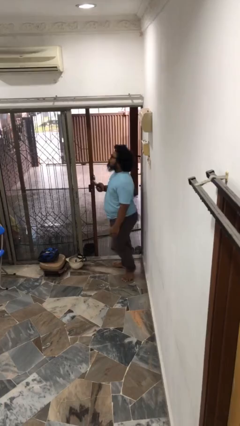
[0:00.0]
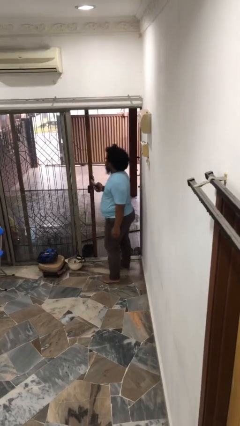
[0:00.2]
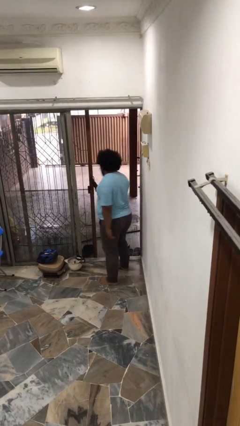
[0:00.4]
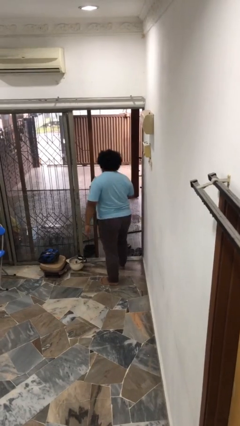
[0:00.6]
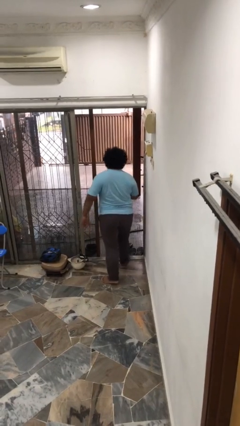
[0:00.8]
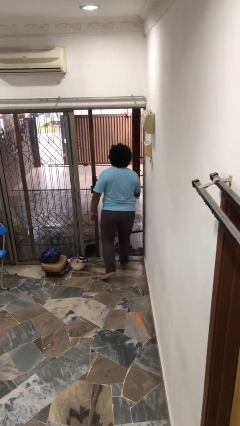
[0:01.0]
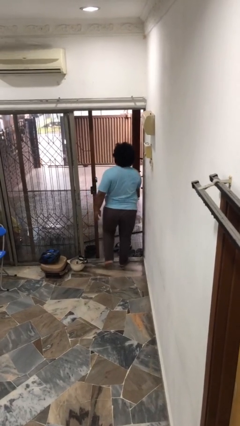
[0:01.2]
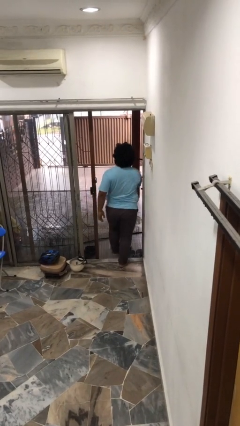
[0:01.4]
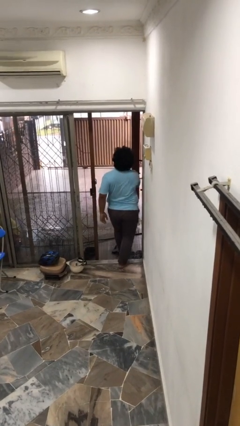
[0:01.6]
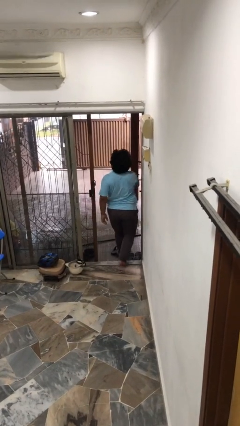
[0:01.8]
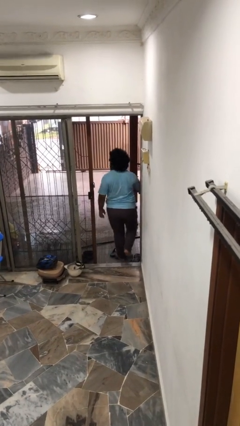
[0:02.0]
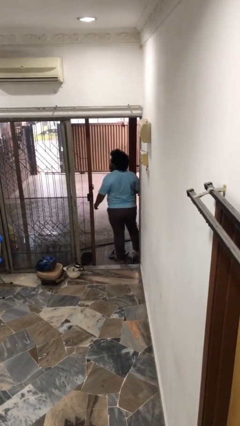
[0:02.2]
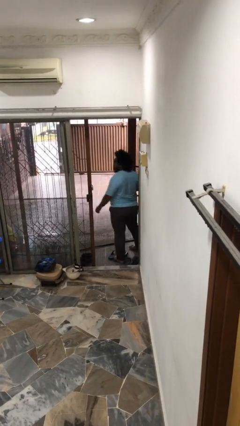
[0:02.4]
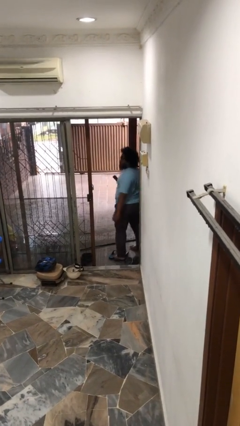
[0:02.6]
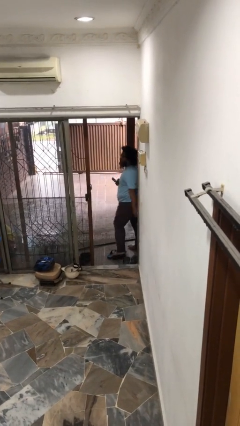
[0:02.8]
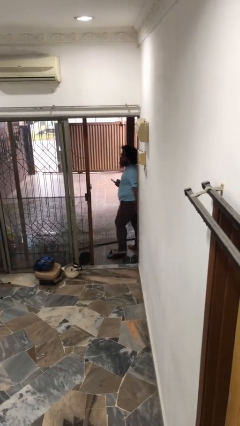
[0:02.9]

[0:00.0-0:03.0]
person exits scene through structure

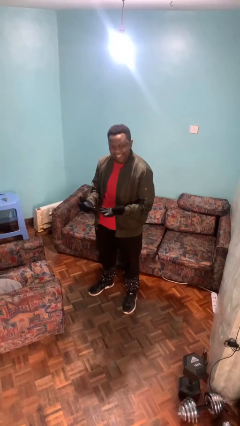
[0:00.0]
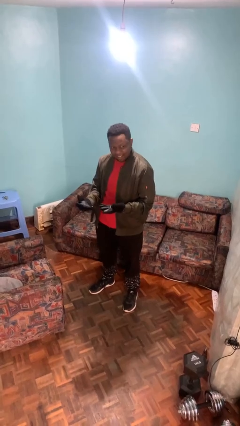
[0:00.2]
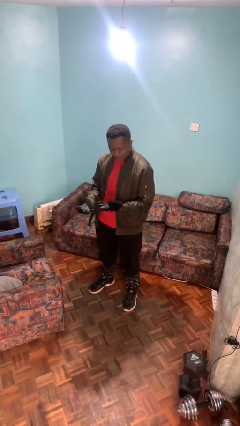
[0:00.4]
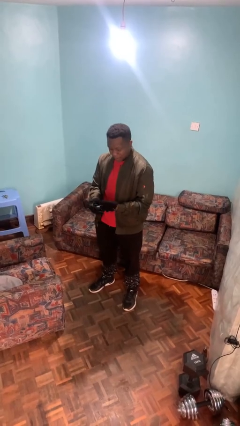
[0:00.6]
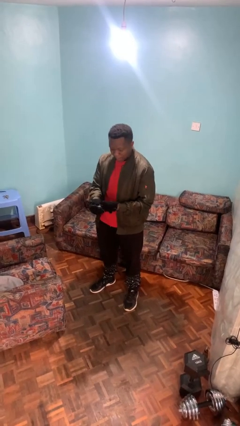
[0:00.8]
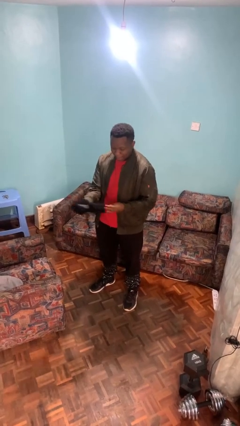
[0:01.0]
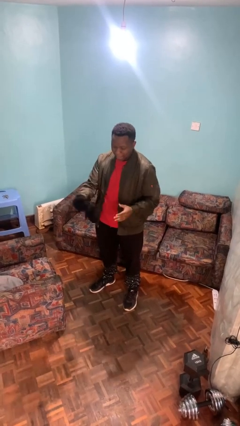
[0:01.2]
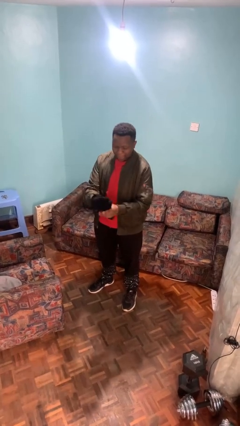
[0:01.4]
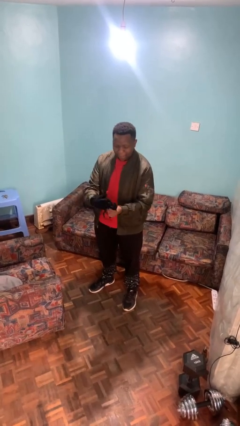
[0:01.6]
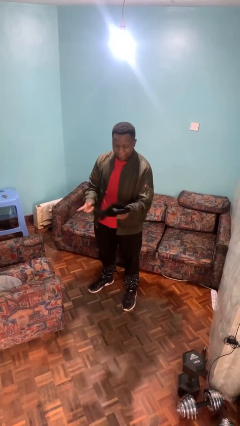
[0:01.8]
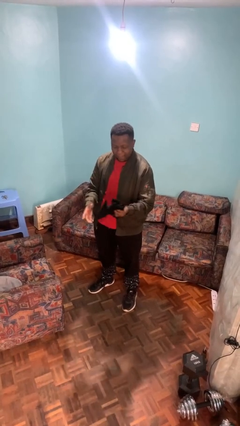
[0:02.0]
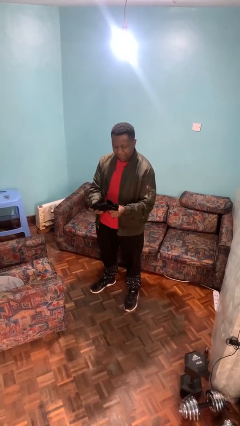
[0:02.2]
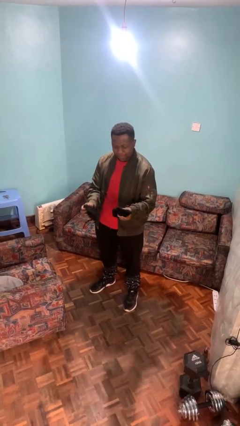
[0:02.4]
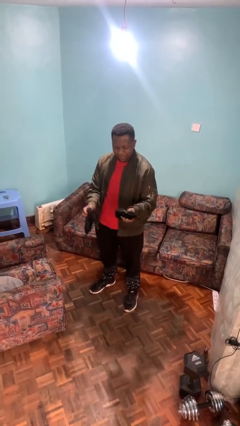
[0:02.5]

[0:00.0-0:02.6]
person takes off gloves

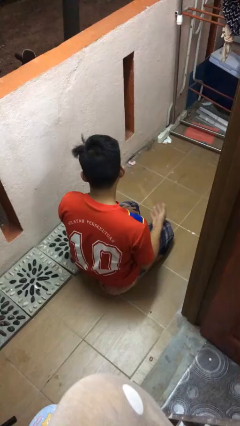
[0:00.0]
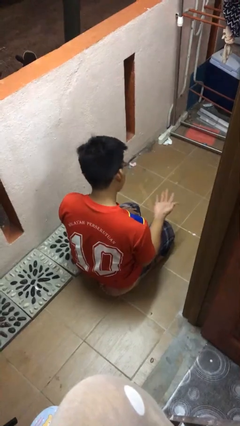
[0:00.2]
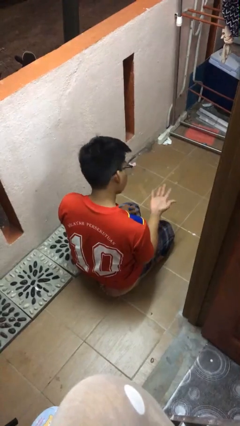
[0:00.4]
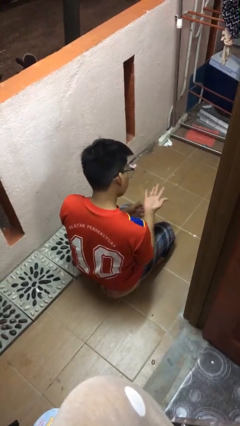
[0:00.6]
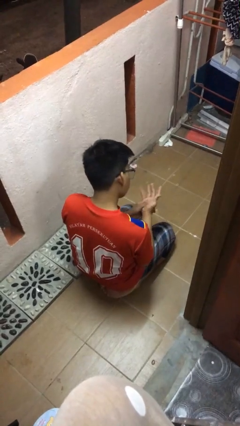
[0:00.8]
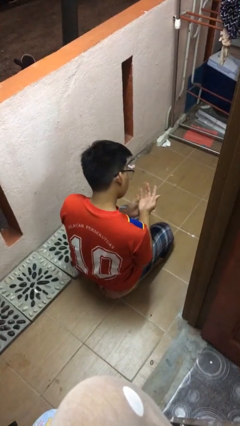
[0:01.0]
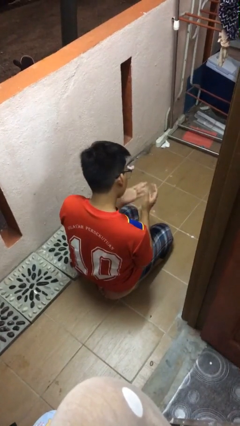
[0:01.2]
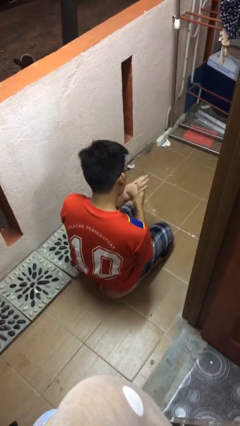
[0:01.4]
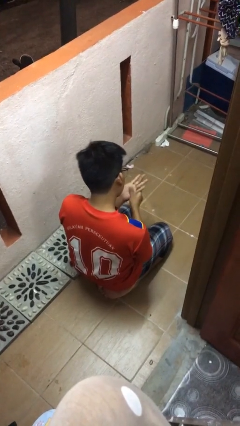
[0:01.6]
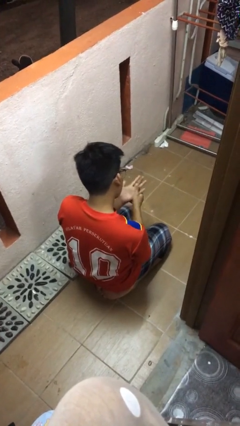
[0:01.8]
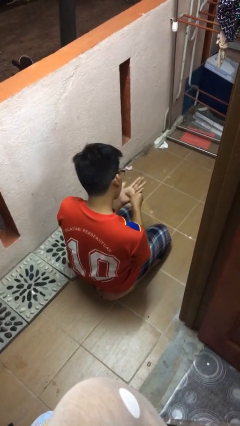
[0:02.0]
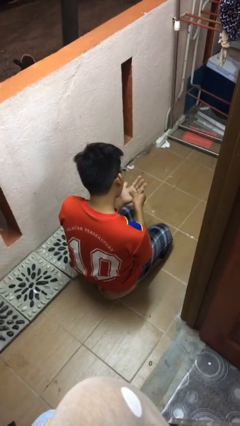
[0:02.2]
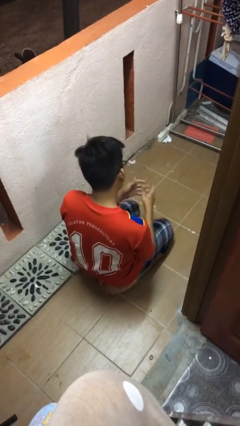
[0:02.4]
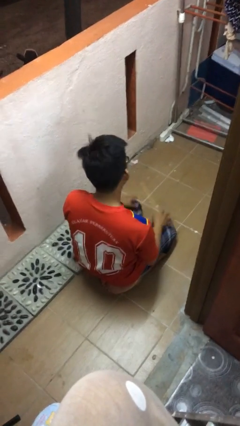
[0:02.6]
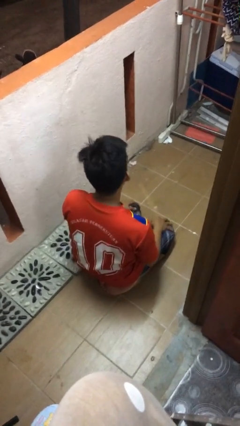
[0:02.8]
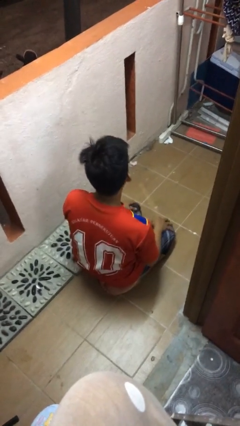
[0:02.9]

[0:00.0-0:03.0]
person looks at hands in lap

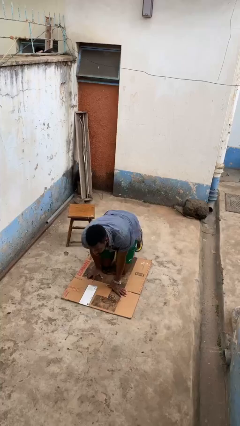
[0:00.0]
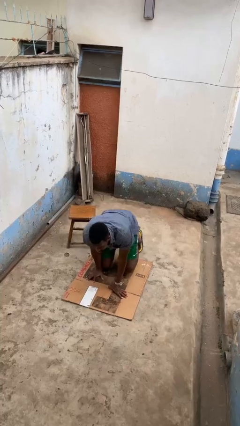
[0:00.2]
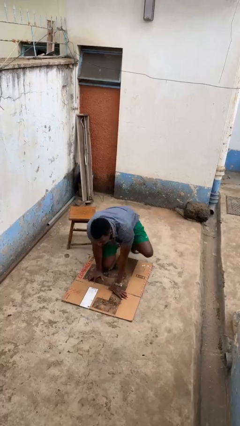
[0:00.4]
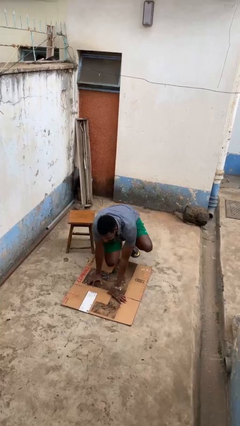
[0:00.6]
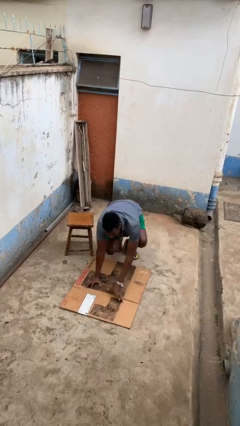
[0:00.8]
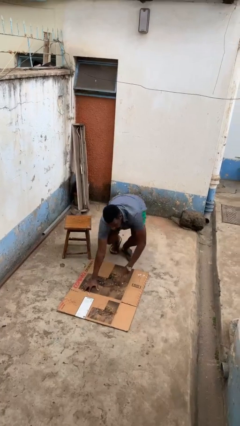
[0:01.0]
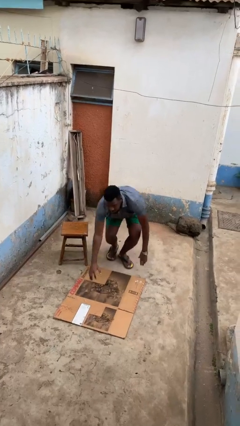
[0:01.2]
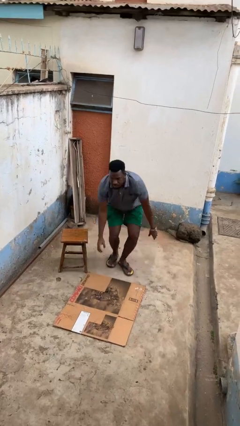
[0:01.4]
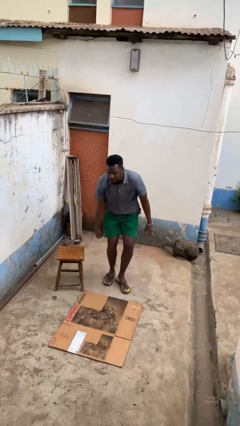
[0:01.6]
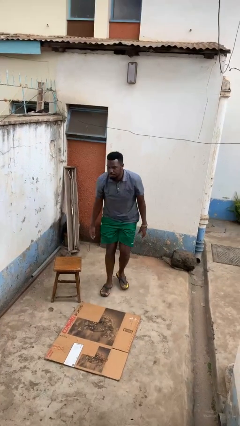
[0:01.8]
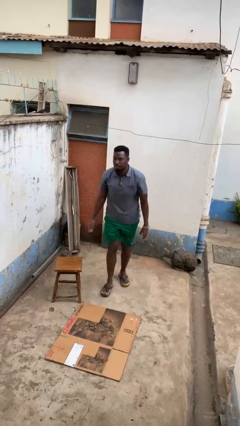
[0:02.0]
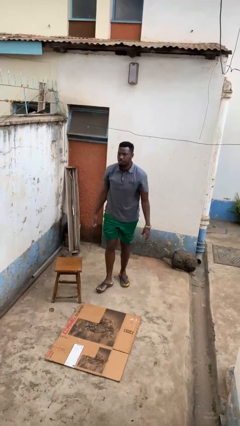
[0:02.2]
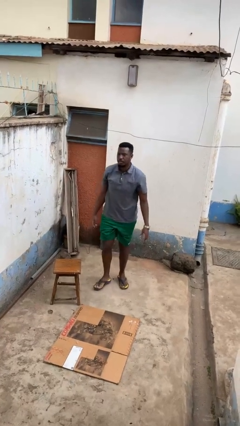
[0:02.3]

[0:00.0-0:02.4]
person stands up from floor

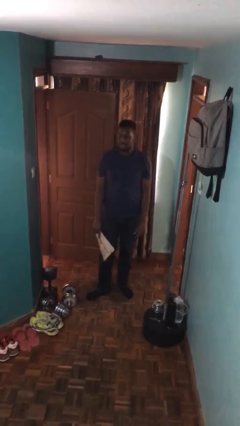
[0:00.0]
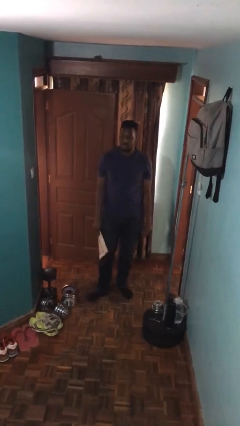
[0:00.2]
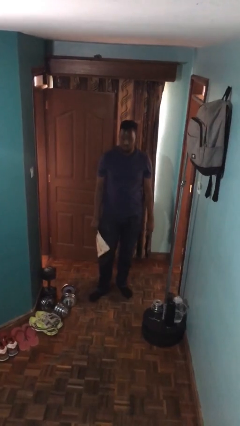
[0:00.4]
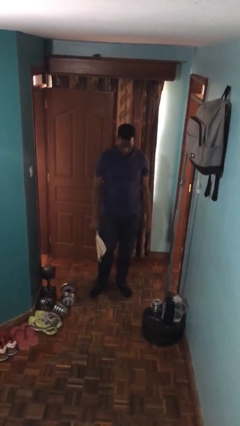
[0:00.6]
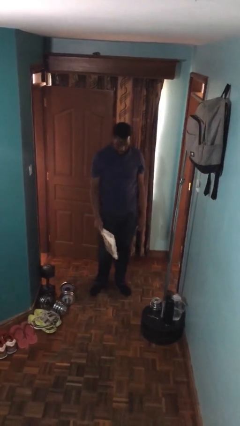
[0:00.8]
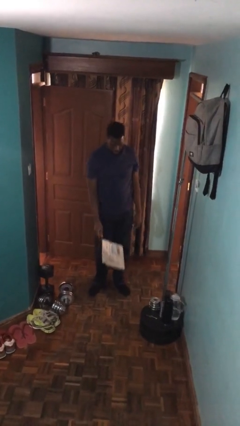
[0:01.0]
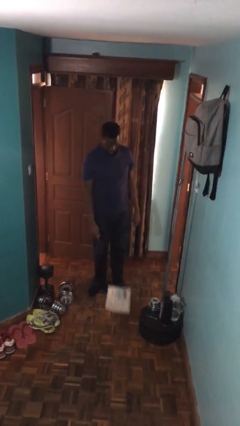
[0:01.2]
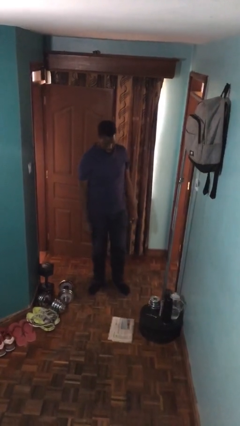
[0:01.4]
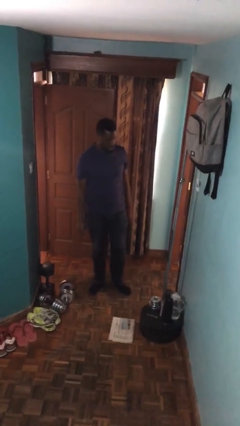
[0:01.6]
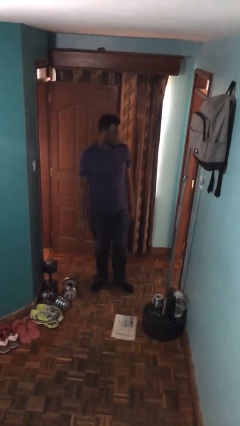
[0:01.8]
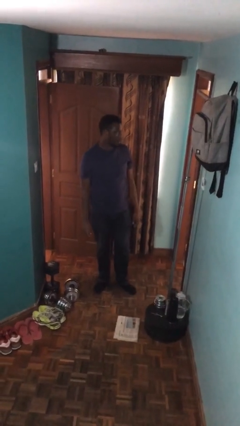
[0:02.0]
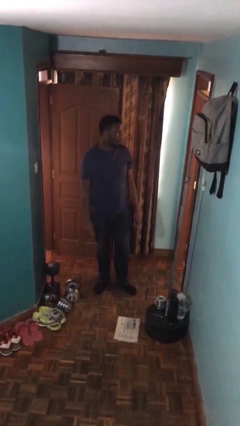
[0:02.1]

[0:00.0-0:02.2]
person drops object

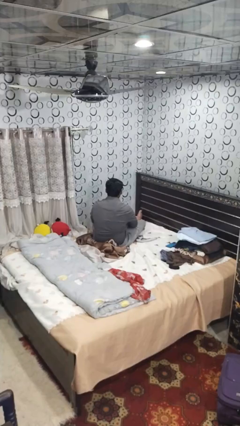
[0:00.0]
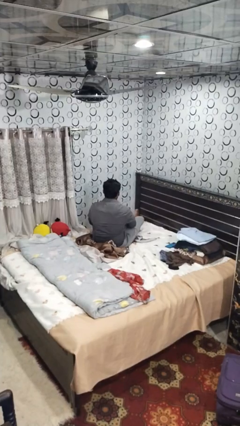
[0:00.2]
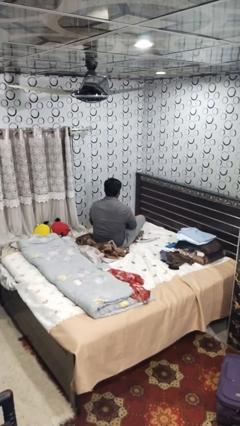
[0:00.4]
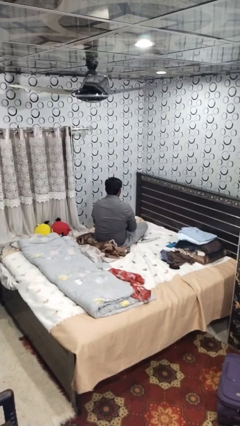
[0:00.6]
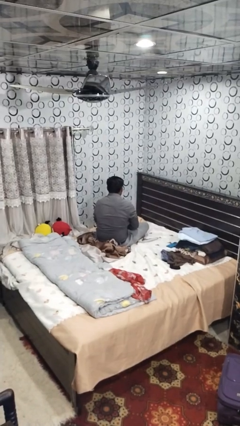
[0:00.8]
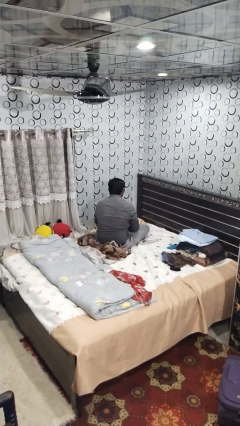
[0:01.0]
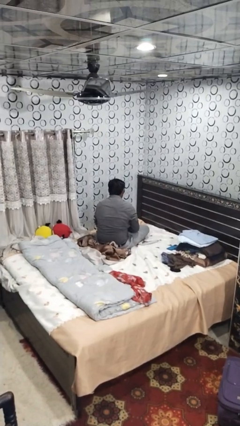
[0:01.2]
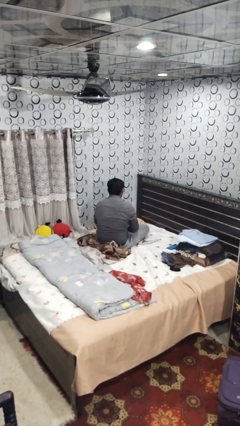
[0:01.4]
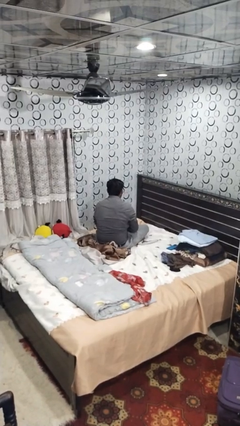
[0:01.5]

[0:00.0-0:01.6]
person crosses legs

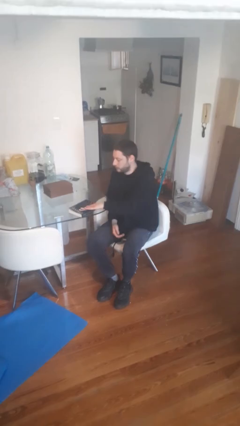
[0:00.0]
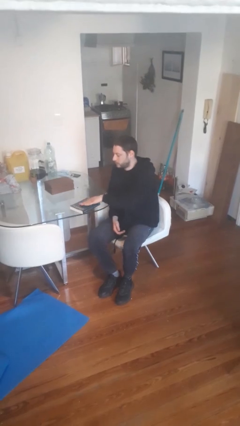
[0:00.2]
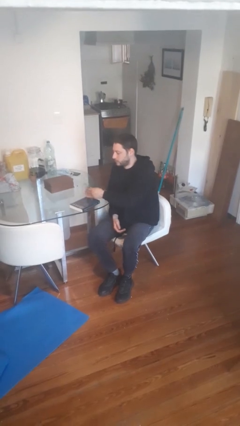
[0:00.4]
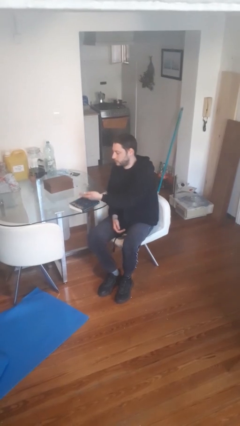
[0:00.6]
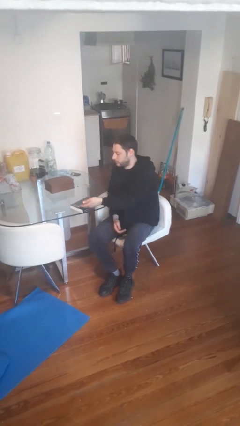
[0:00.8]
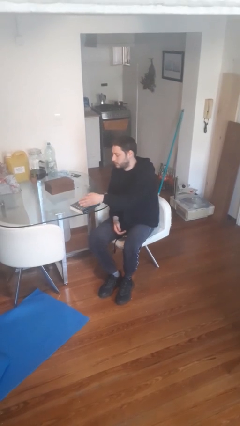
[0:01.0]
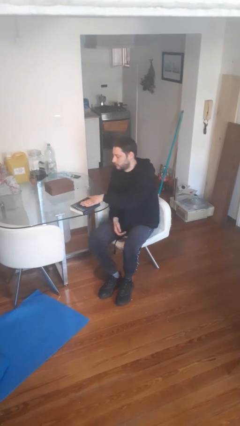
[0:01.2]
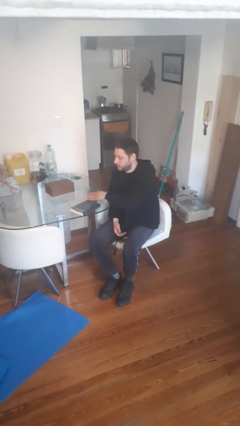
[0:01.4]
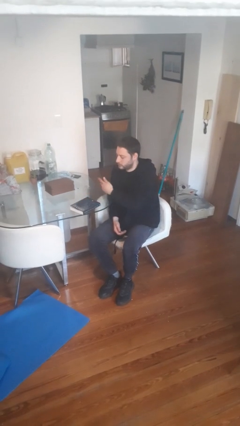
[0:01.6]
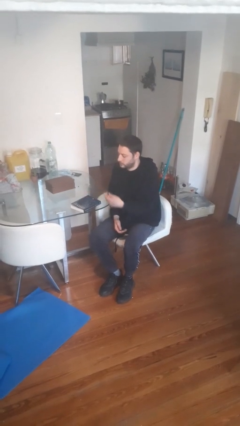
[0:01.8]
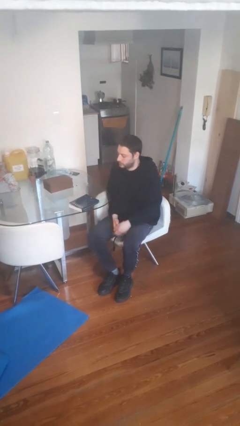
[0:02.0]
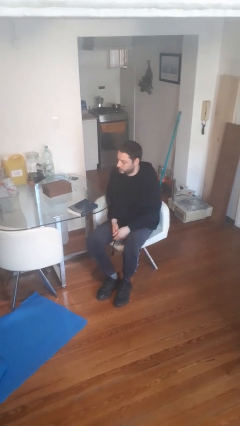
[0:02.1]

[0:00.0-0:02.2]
person waves hand over object
